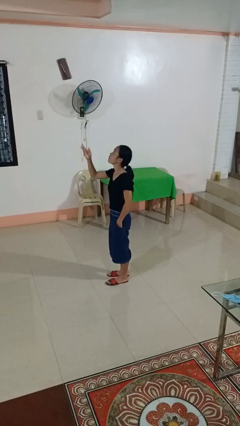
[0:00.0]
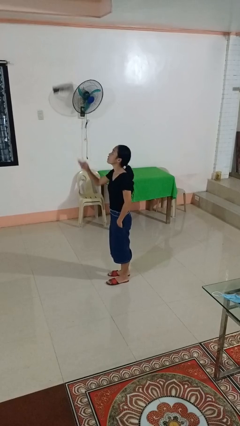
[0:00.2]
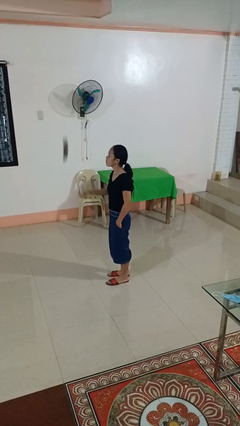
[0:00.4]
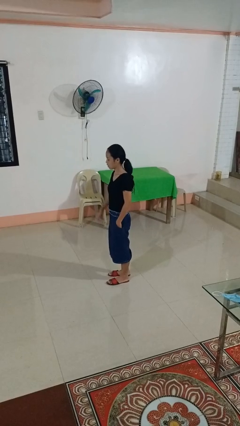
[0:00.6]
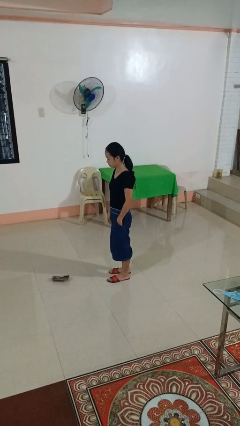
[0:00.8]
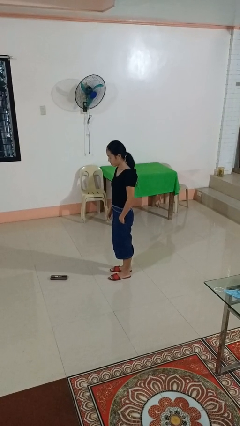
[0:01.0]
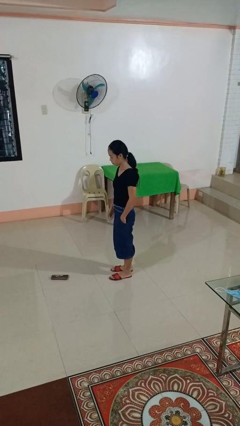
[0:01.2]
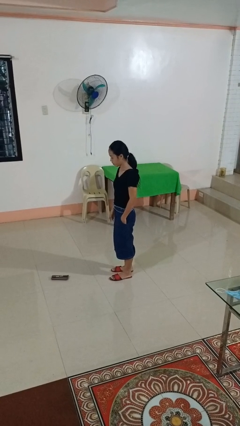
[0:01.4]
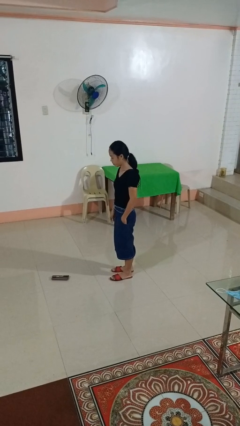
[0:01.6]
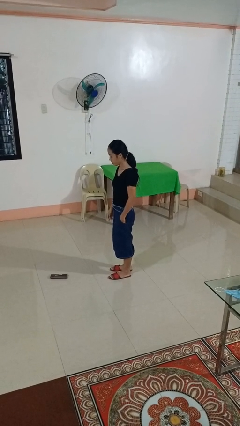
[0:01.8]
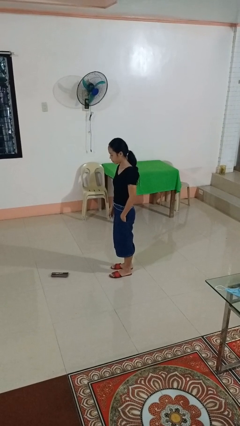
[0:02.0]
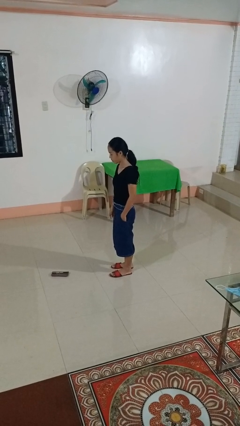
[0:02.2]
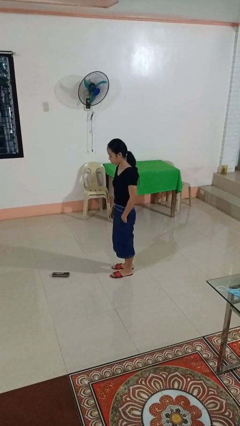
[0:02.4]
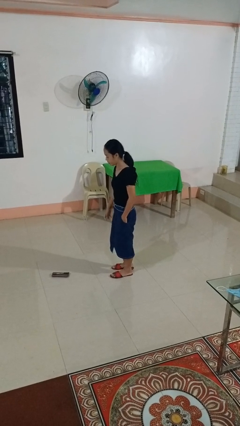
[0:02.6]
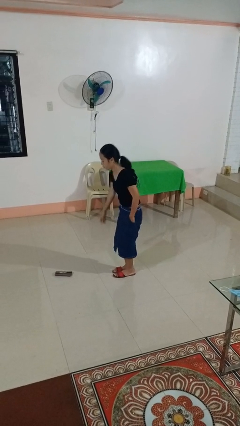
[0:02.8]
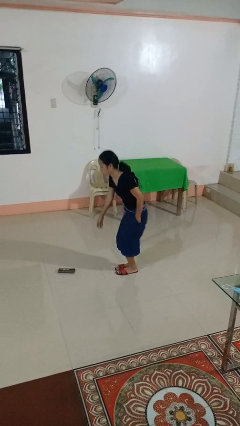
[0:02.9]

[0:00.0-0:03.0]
person throws object into air

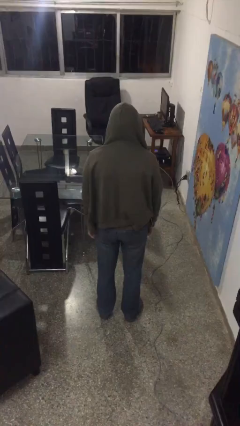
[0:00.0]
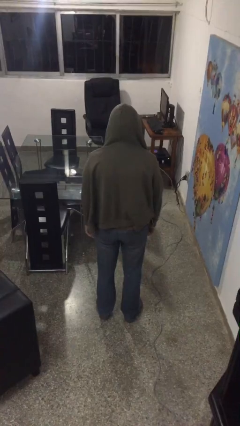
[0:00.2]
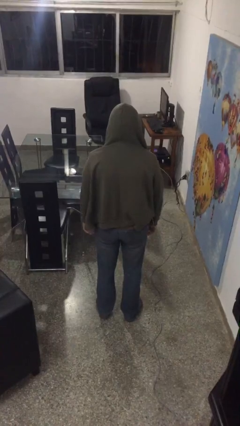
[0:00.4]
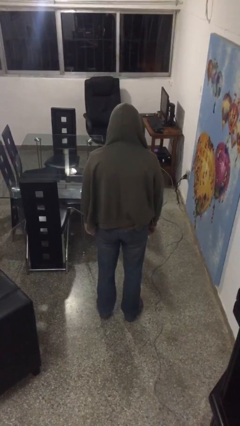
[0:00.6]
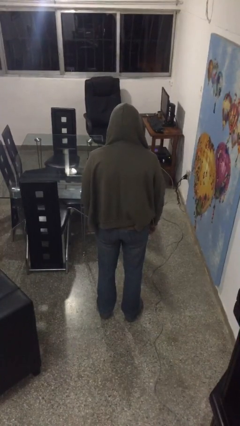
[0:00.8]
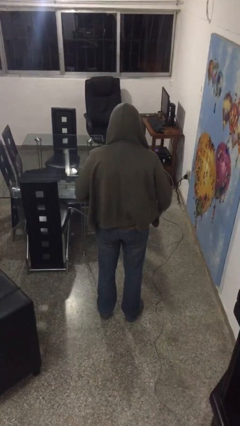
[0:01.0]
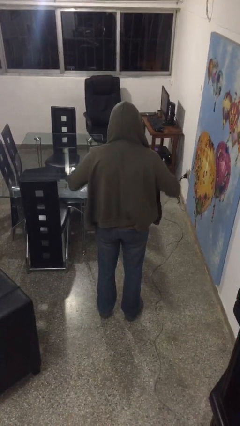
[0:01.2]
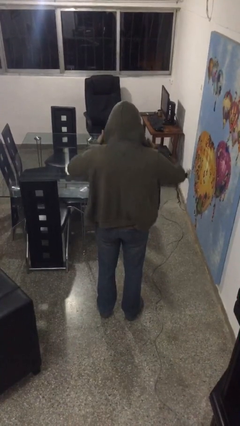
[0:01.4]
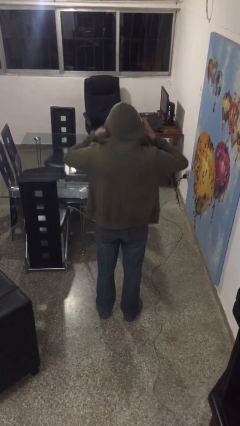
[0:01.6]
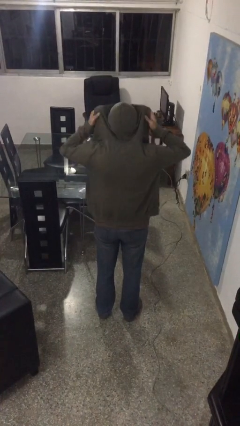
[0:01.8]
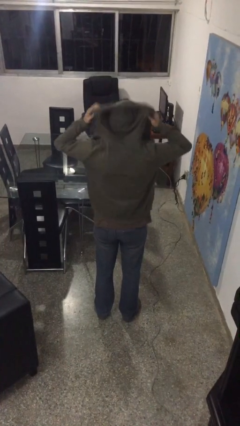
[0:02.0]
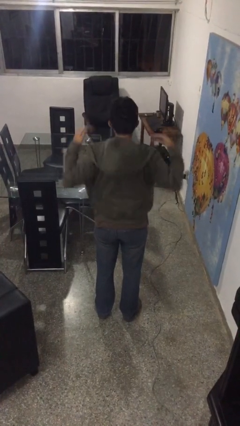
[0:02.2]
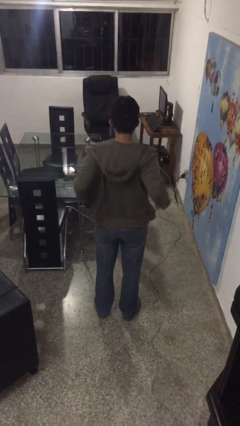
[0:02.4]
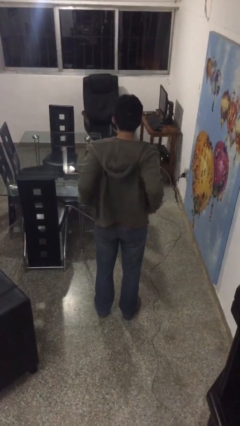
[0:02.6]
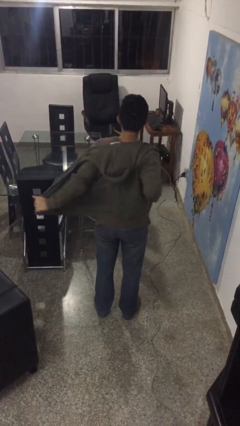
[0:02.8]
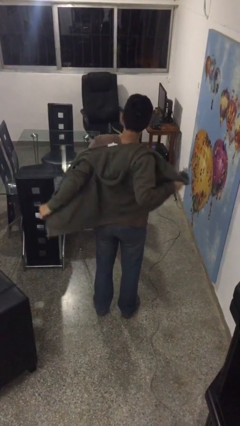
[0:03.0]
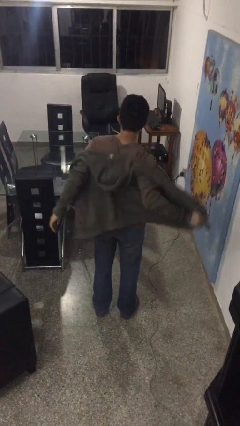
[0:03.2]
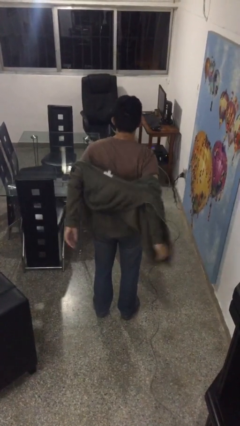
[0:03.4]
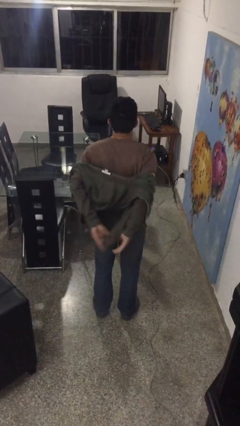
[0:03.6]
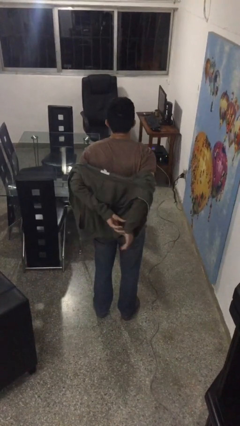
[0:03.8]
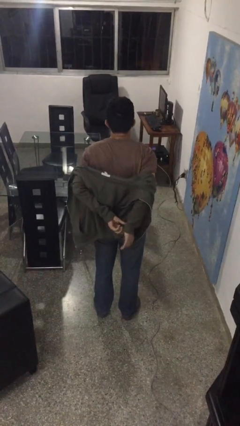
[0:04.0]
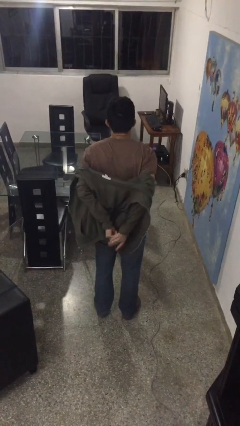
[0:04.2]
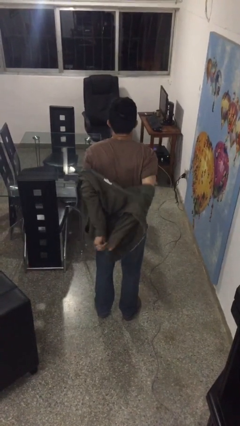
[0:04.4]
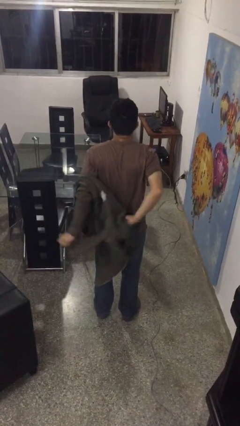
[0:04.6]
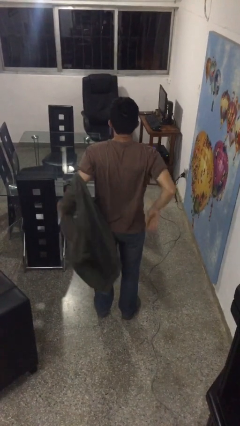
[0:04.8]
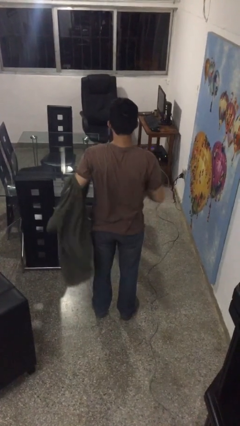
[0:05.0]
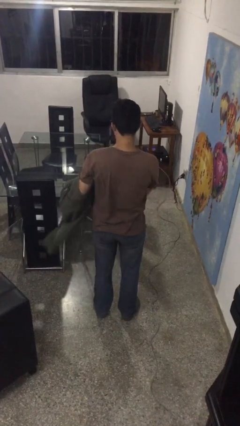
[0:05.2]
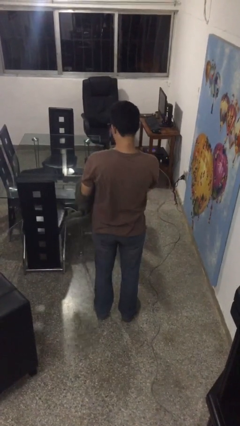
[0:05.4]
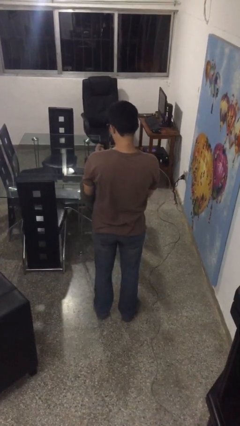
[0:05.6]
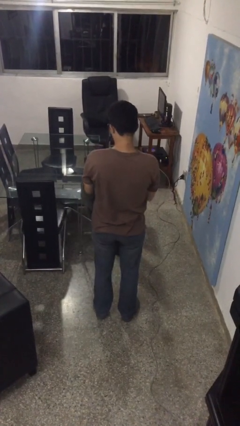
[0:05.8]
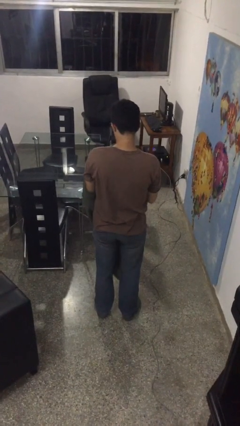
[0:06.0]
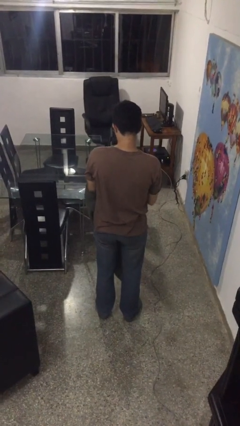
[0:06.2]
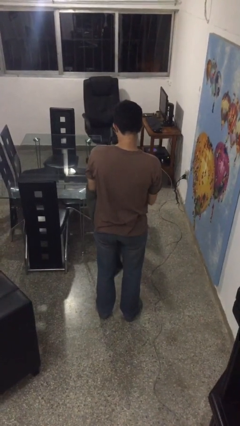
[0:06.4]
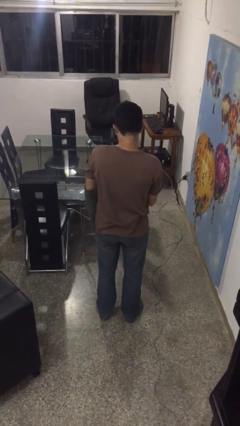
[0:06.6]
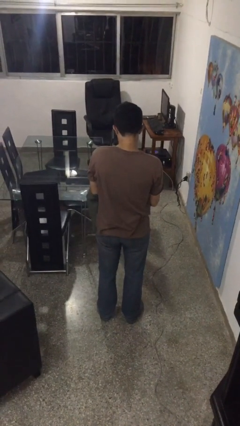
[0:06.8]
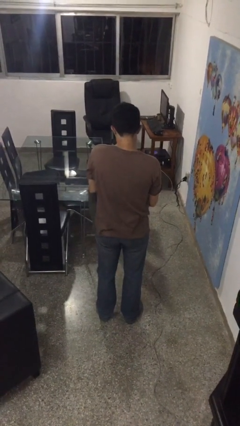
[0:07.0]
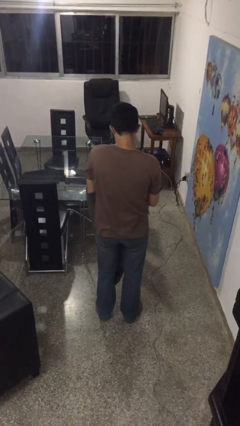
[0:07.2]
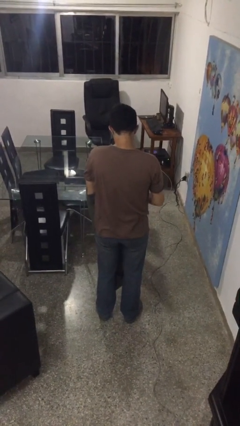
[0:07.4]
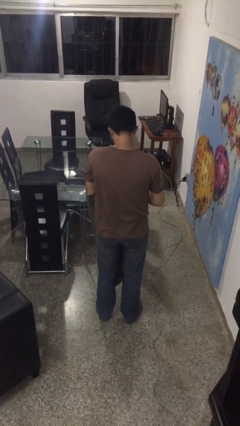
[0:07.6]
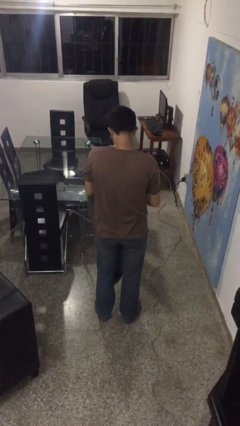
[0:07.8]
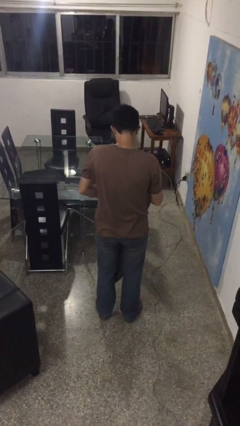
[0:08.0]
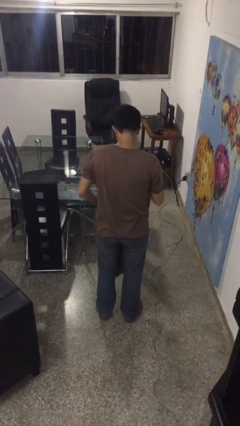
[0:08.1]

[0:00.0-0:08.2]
person takes off hoodie

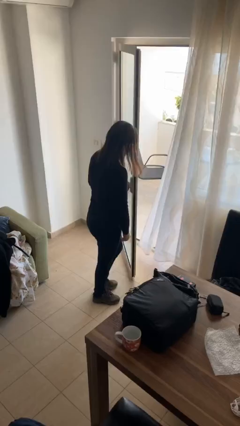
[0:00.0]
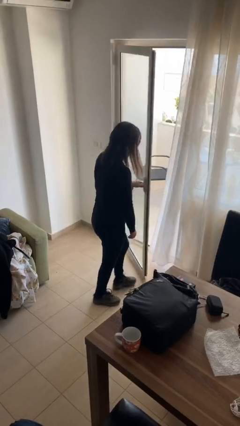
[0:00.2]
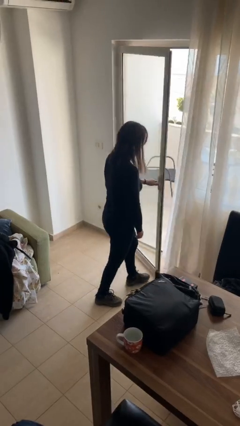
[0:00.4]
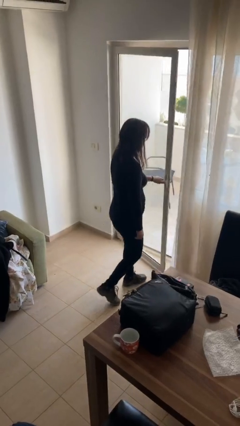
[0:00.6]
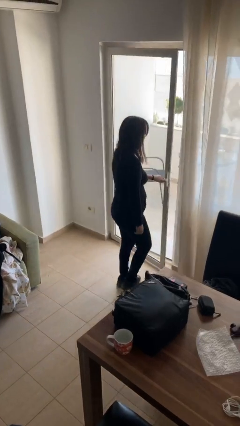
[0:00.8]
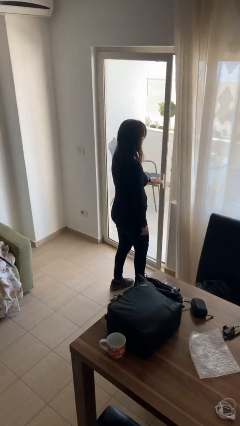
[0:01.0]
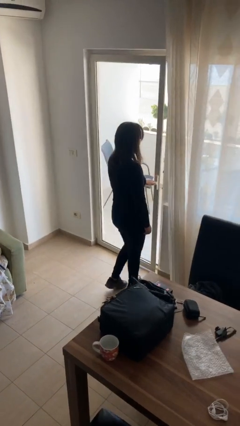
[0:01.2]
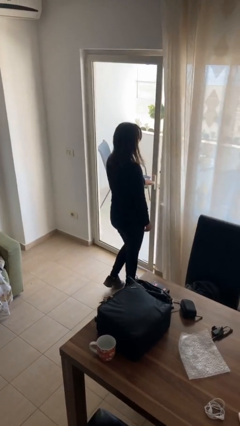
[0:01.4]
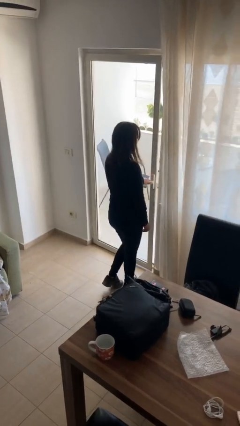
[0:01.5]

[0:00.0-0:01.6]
person closes facility door

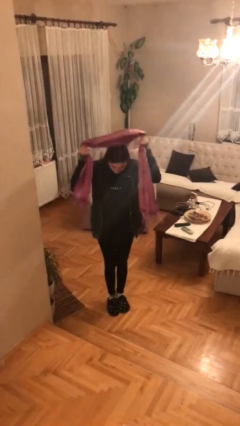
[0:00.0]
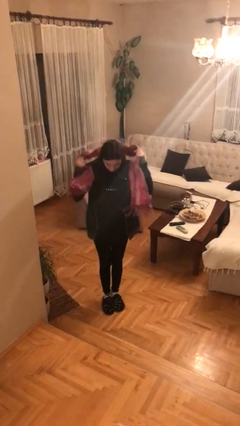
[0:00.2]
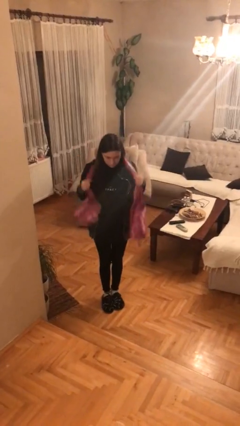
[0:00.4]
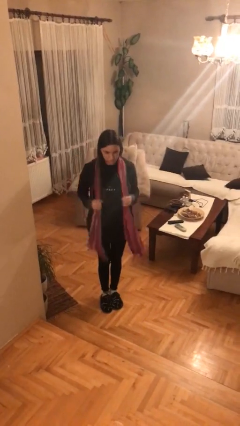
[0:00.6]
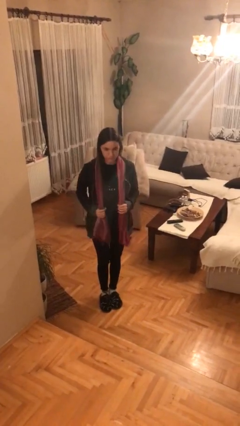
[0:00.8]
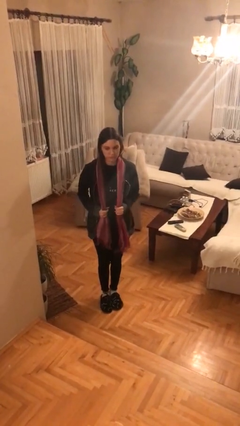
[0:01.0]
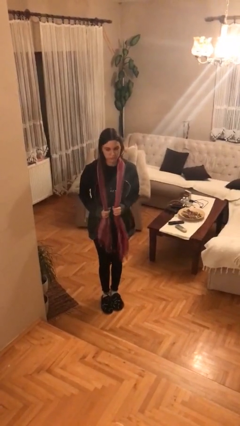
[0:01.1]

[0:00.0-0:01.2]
person puts on scarf

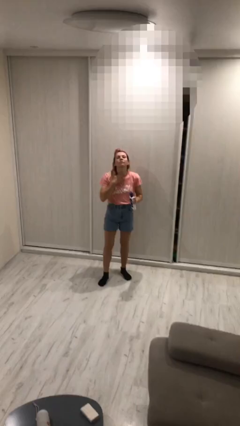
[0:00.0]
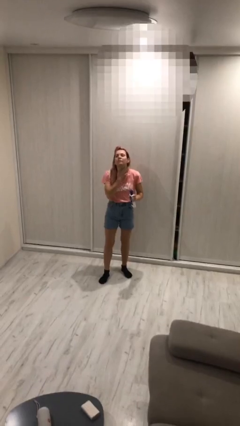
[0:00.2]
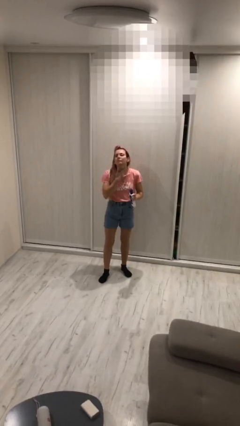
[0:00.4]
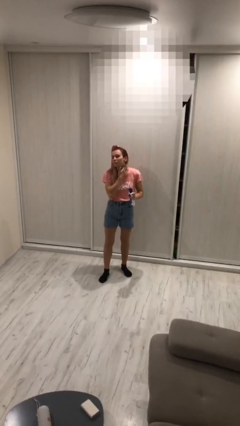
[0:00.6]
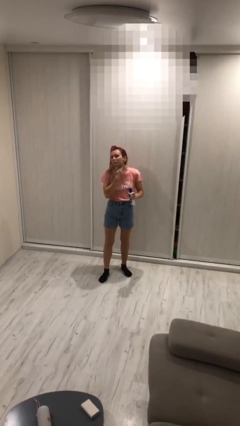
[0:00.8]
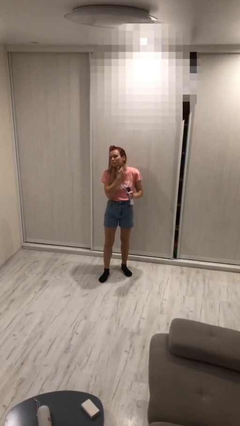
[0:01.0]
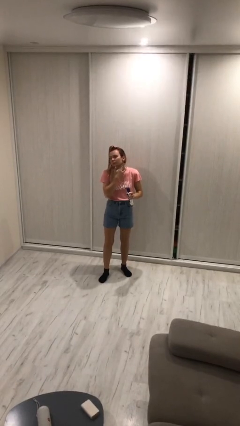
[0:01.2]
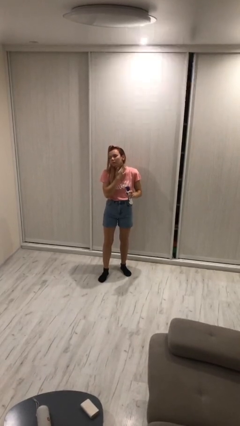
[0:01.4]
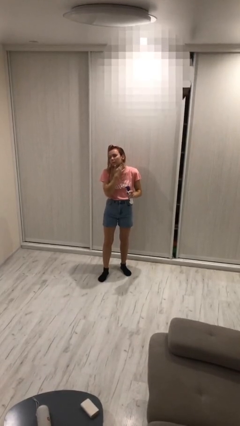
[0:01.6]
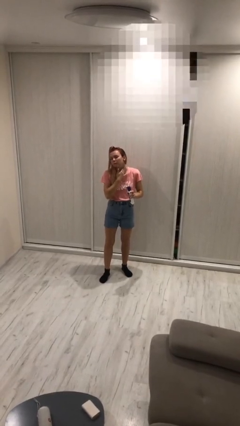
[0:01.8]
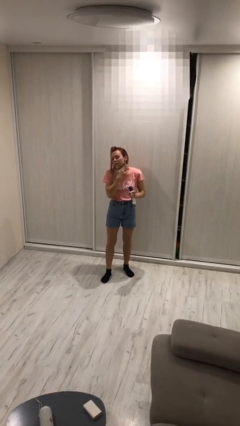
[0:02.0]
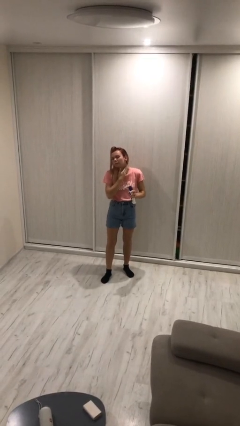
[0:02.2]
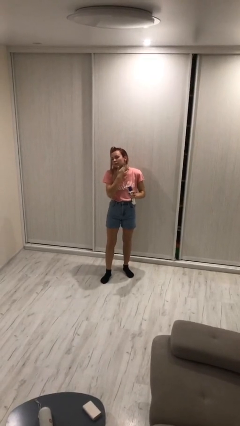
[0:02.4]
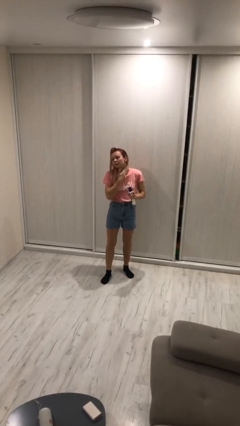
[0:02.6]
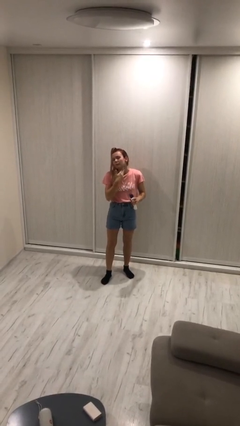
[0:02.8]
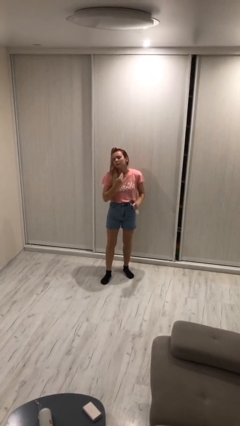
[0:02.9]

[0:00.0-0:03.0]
person applies sunscreen

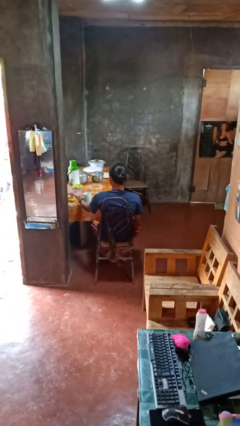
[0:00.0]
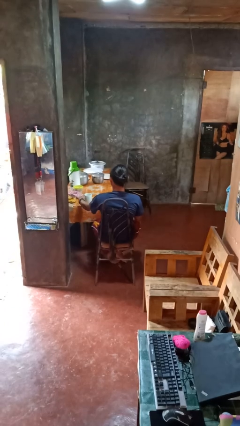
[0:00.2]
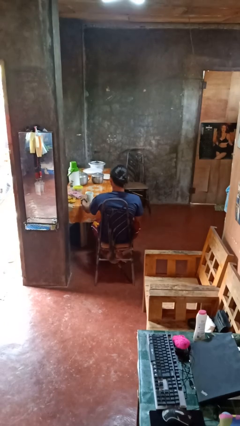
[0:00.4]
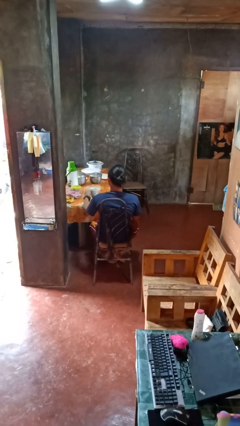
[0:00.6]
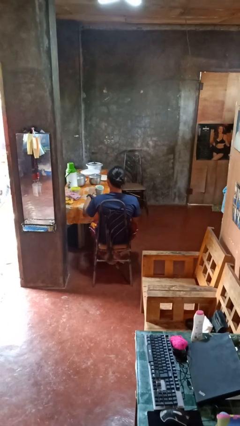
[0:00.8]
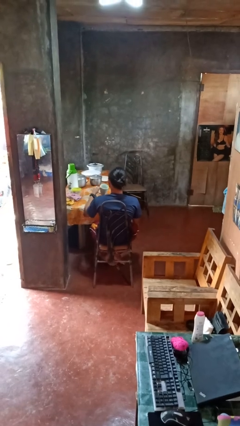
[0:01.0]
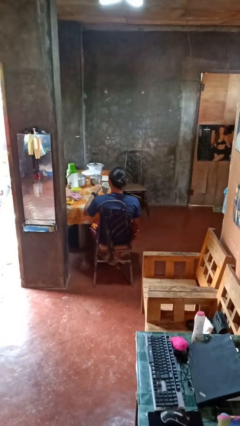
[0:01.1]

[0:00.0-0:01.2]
person picks up object from table
